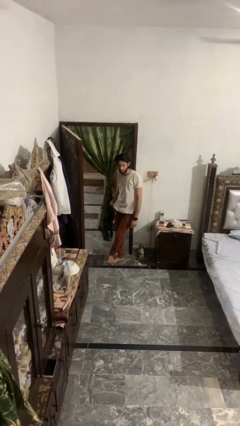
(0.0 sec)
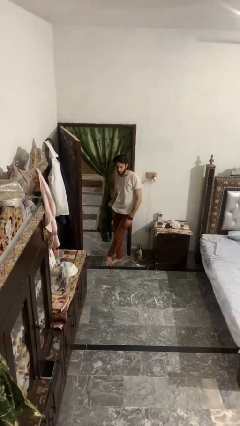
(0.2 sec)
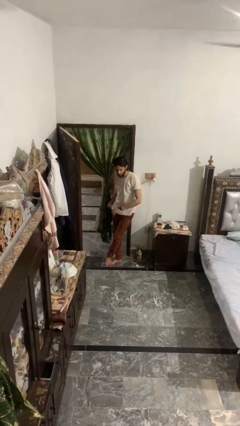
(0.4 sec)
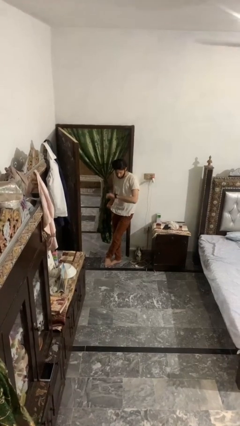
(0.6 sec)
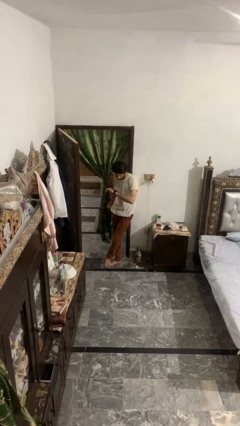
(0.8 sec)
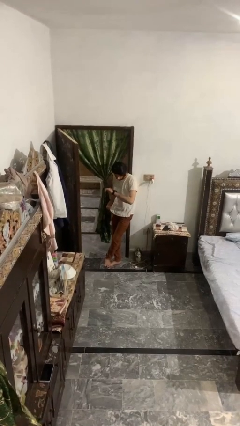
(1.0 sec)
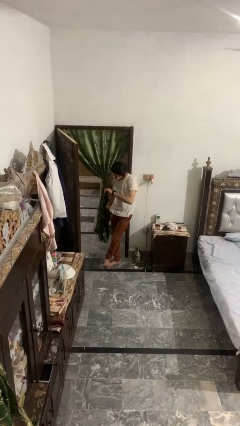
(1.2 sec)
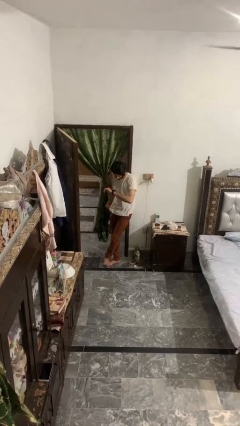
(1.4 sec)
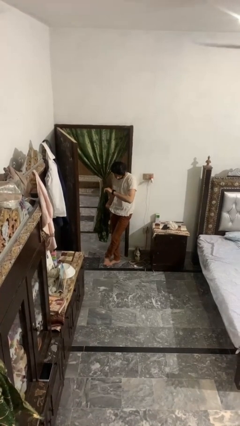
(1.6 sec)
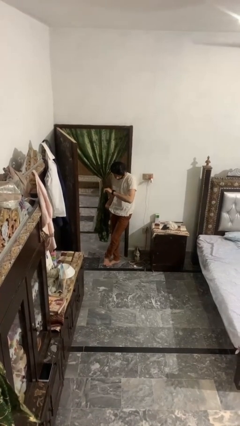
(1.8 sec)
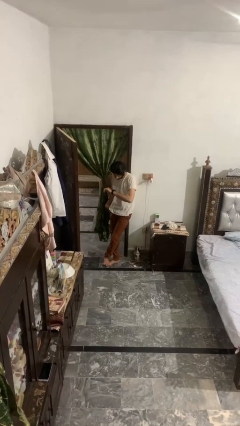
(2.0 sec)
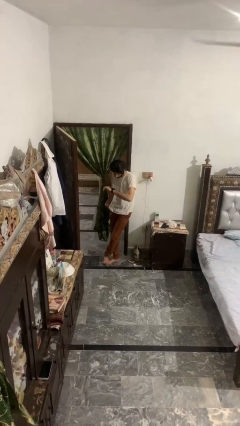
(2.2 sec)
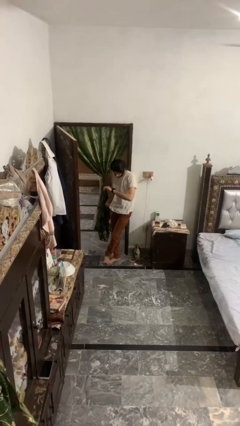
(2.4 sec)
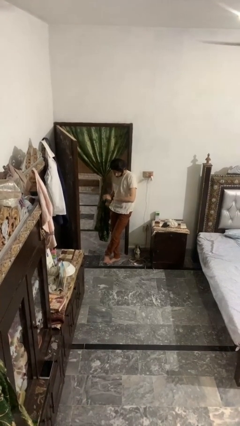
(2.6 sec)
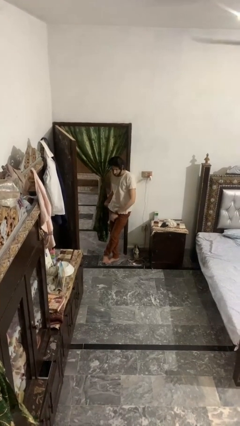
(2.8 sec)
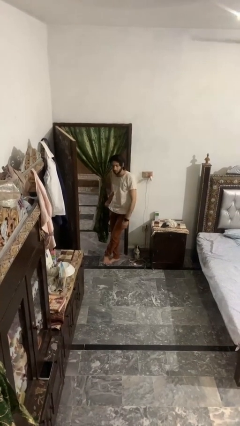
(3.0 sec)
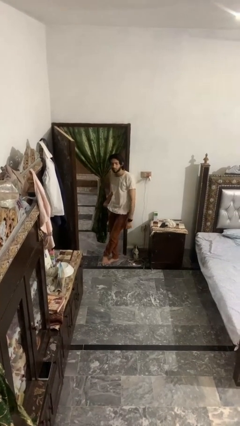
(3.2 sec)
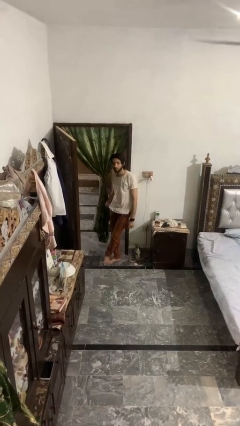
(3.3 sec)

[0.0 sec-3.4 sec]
person looks at wristwatch

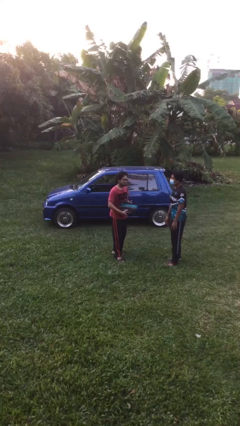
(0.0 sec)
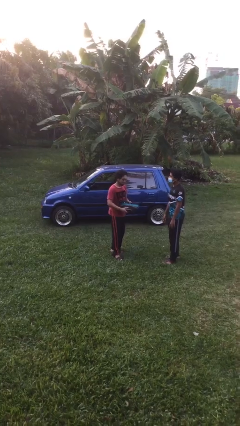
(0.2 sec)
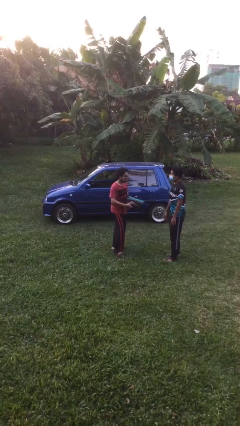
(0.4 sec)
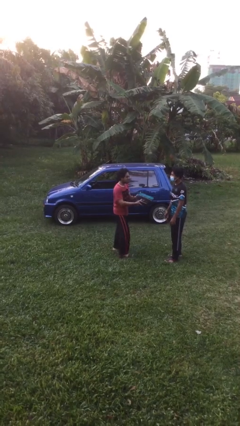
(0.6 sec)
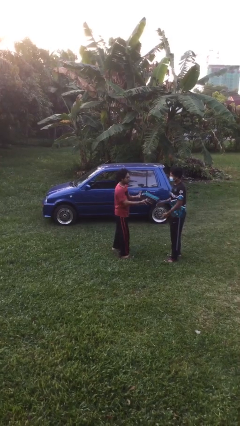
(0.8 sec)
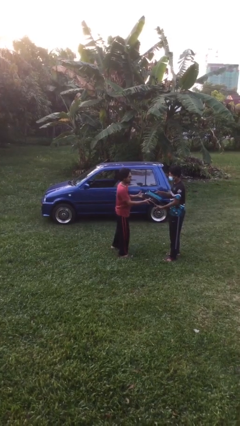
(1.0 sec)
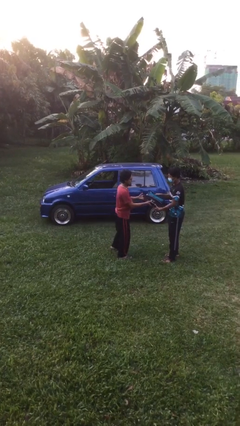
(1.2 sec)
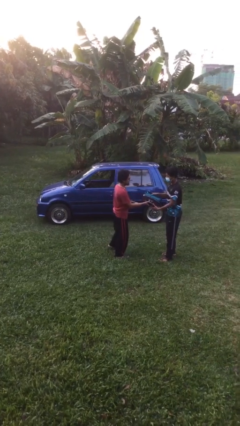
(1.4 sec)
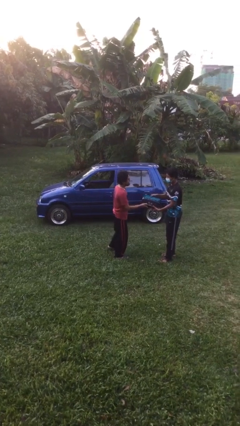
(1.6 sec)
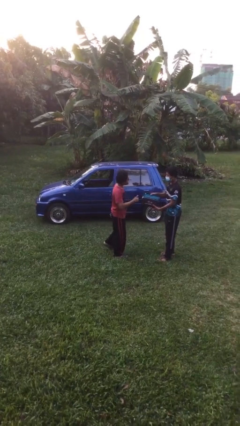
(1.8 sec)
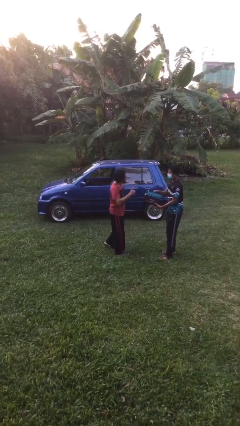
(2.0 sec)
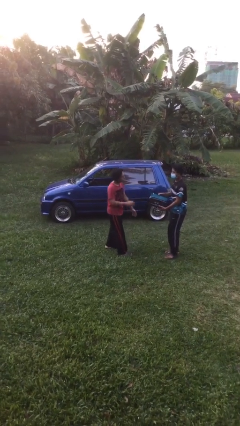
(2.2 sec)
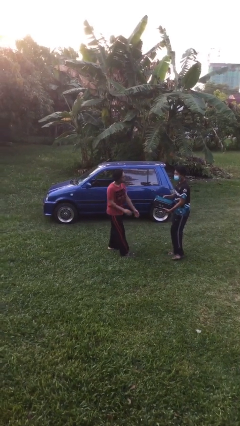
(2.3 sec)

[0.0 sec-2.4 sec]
person transfers object to person

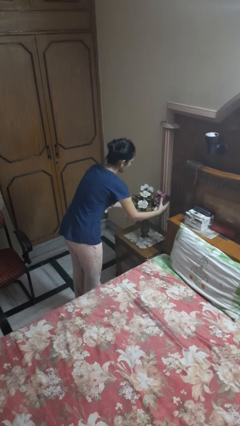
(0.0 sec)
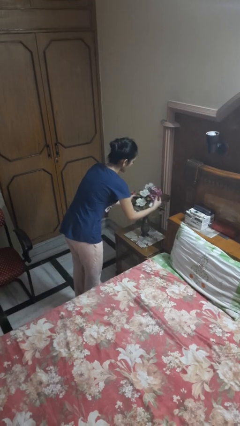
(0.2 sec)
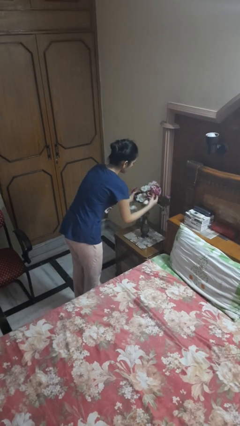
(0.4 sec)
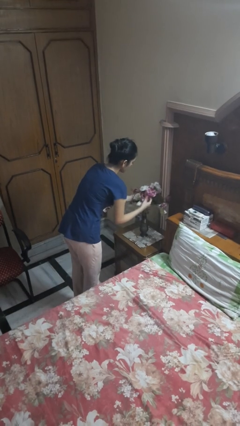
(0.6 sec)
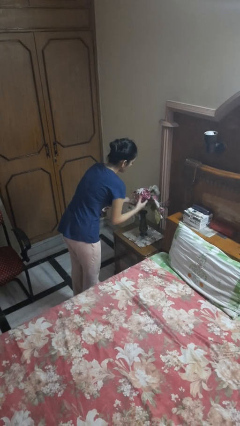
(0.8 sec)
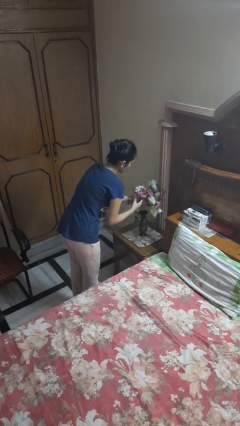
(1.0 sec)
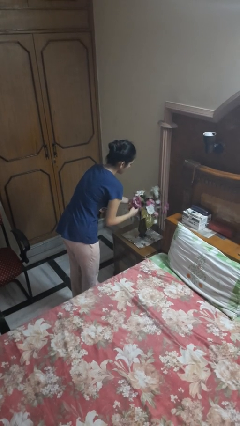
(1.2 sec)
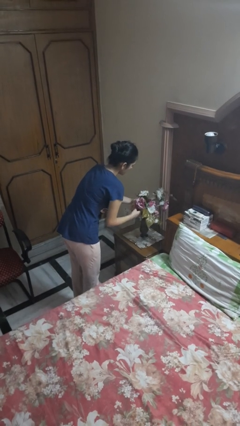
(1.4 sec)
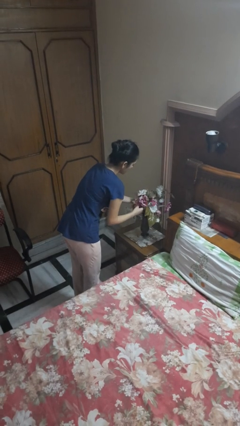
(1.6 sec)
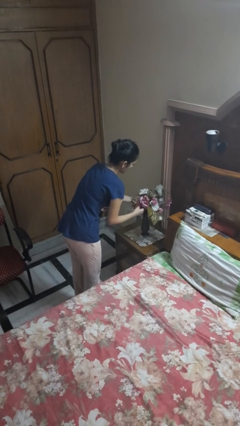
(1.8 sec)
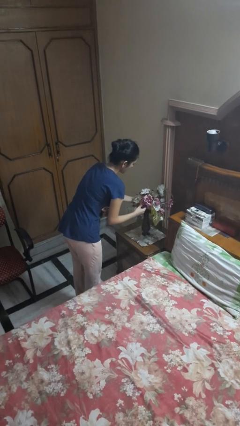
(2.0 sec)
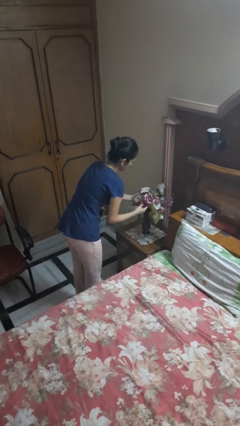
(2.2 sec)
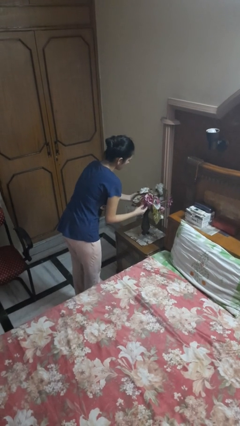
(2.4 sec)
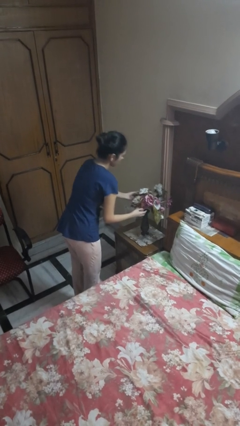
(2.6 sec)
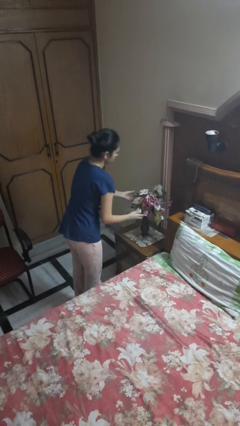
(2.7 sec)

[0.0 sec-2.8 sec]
person arranges flowers in vase

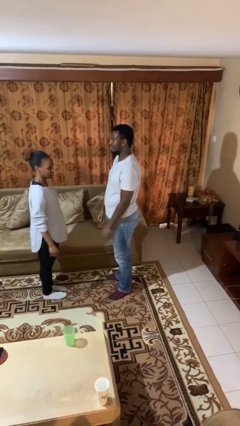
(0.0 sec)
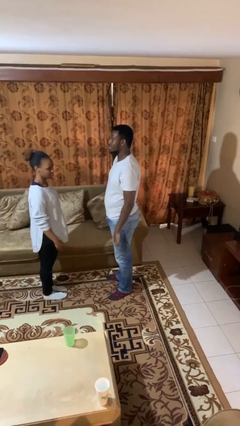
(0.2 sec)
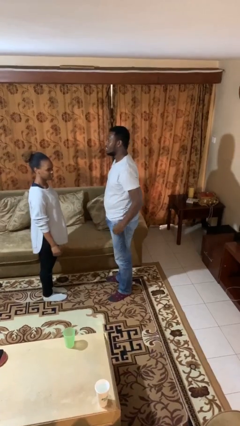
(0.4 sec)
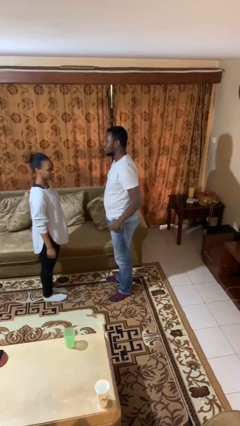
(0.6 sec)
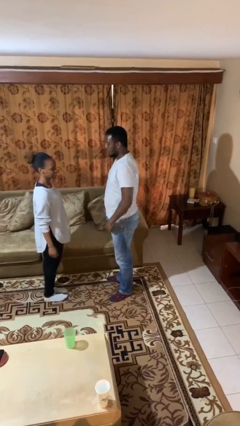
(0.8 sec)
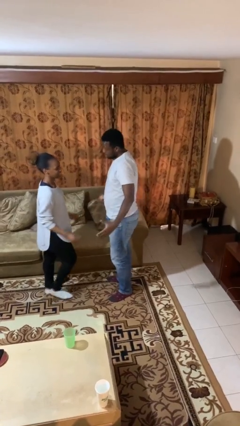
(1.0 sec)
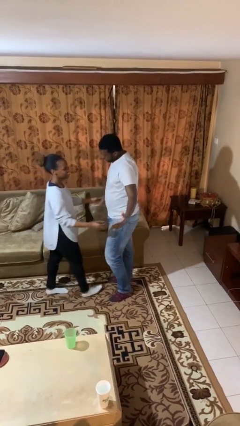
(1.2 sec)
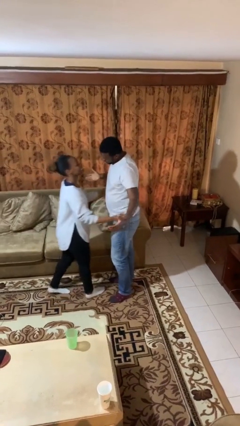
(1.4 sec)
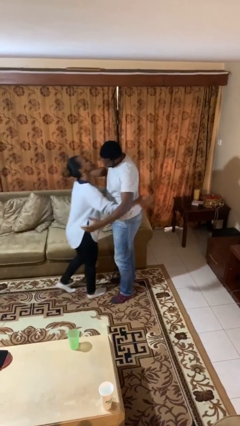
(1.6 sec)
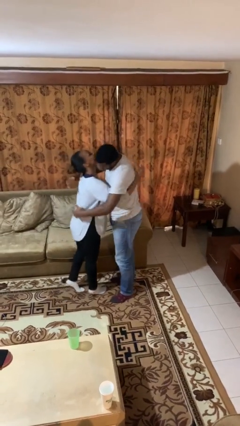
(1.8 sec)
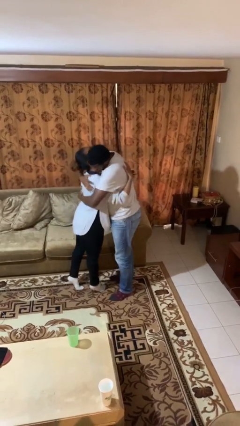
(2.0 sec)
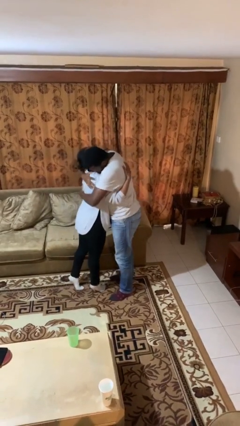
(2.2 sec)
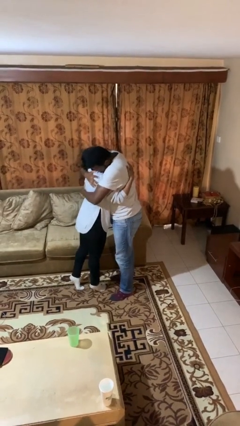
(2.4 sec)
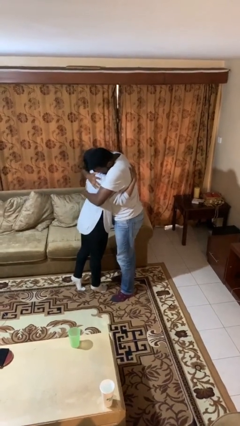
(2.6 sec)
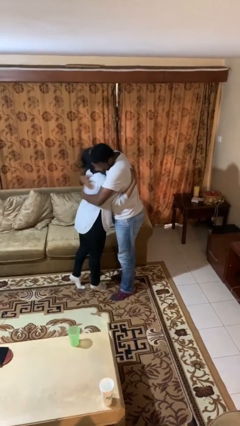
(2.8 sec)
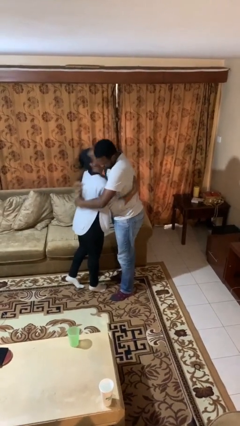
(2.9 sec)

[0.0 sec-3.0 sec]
person embraces person

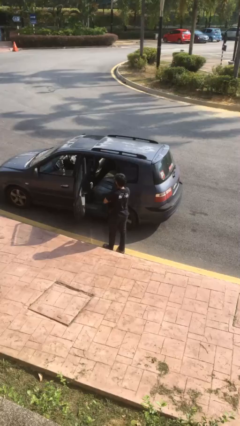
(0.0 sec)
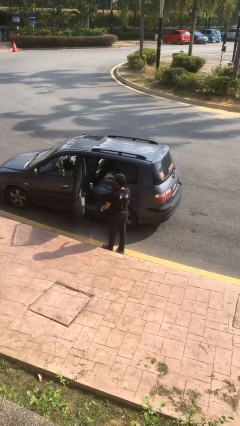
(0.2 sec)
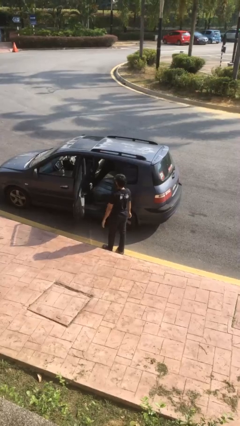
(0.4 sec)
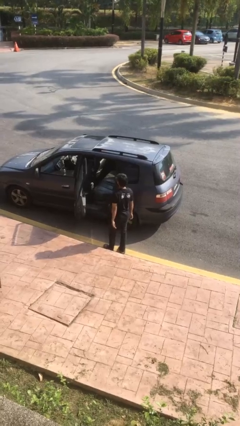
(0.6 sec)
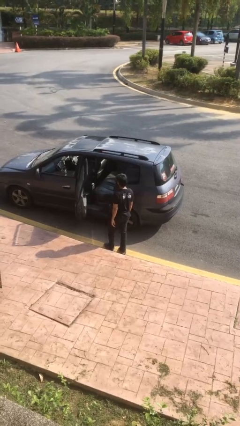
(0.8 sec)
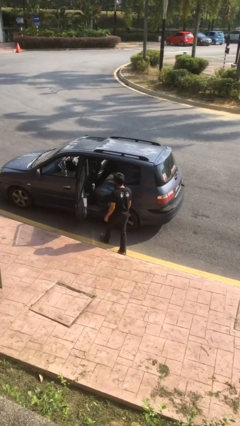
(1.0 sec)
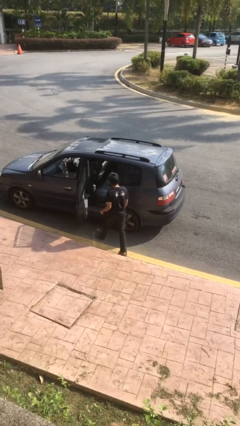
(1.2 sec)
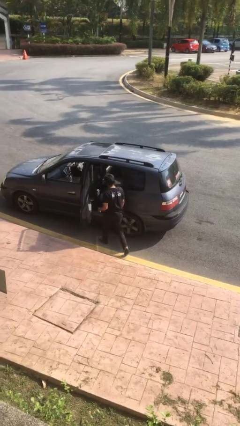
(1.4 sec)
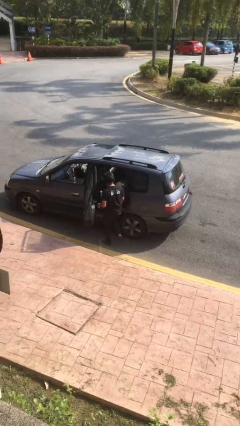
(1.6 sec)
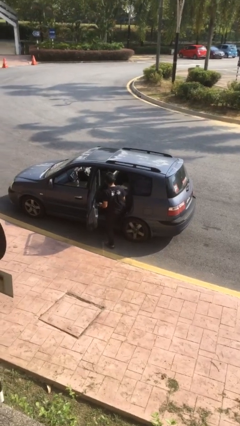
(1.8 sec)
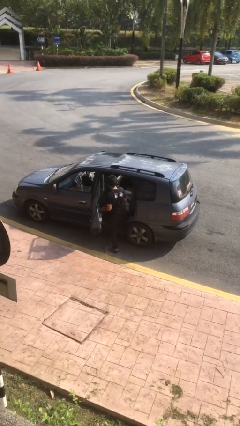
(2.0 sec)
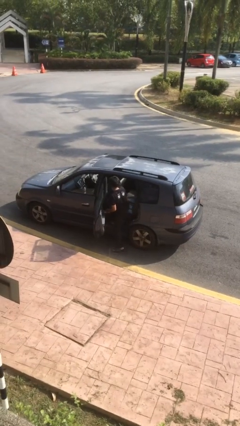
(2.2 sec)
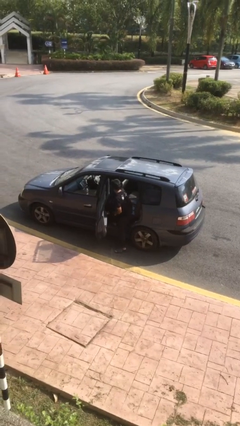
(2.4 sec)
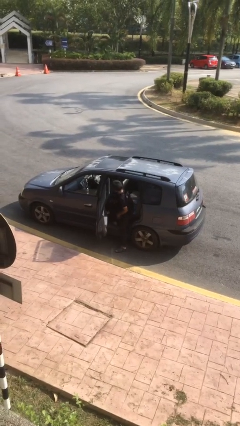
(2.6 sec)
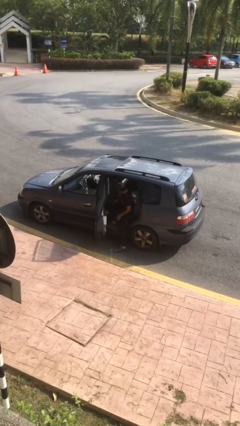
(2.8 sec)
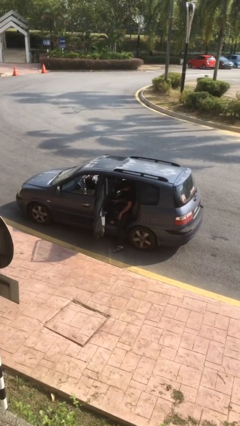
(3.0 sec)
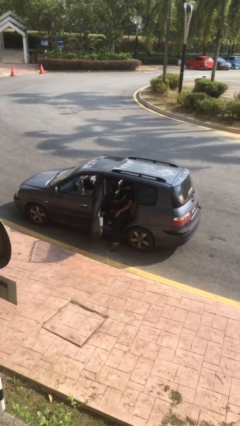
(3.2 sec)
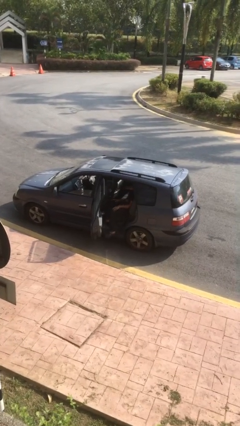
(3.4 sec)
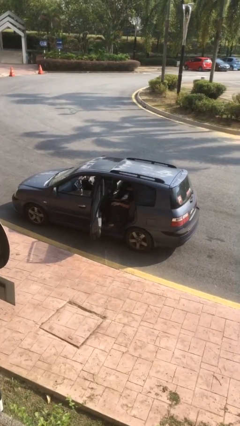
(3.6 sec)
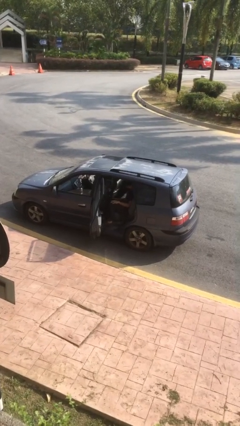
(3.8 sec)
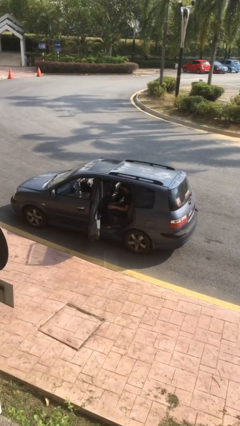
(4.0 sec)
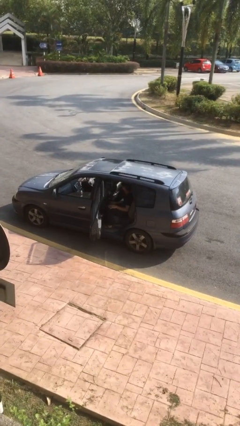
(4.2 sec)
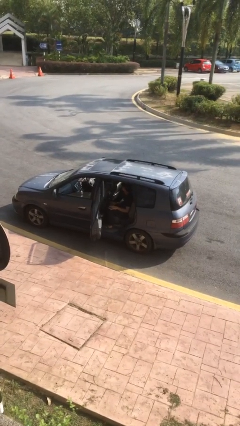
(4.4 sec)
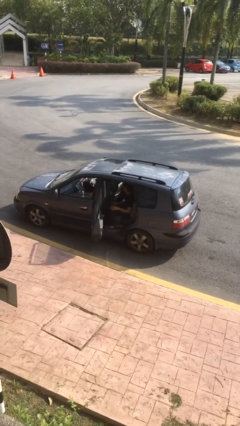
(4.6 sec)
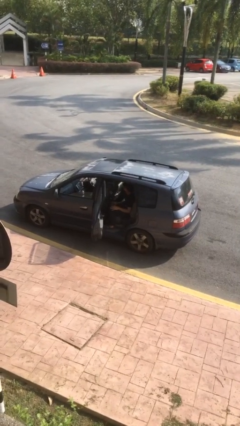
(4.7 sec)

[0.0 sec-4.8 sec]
person enters car

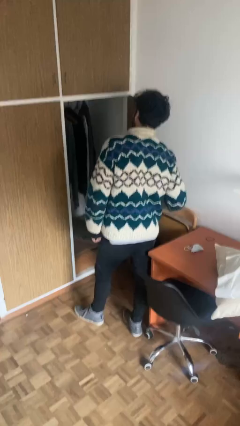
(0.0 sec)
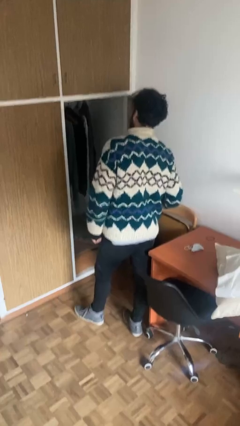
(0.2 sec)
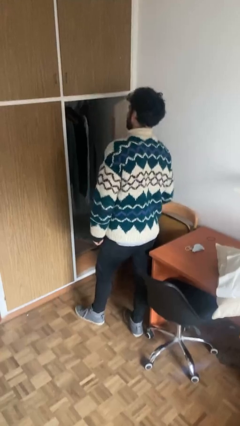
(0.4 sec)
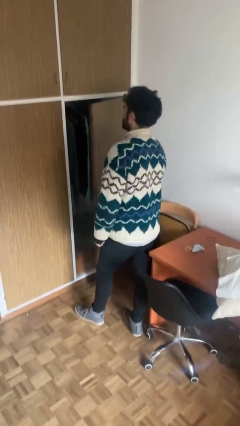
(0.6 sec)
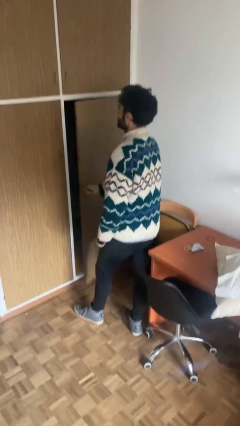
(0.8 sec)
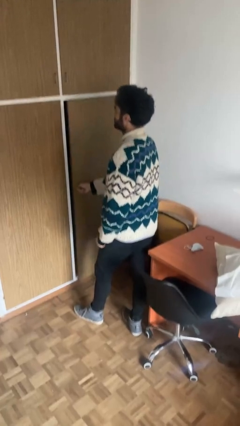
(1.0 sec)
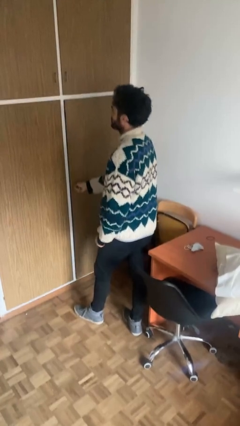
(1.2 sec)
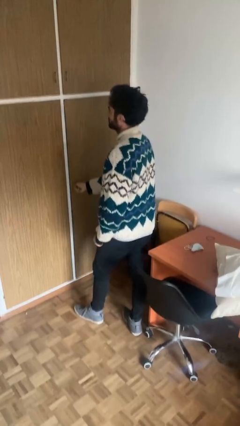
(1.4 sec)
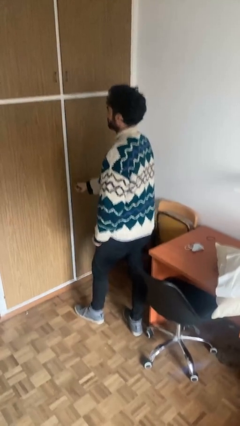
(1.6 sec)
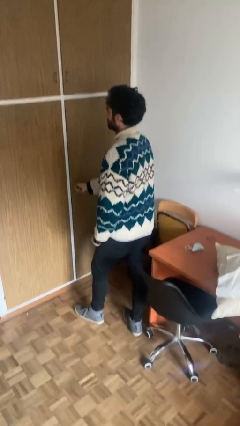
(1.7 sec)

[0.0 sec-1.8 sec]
person closes closet door
